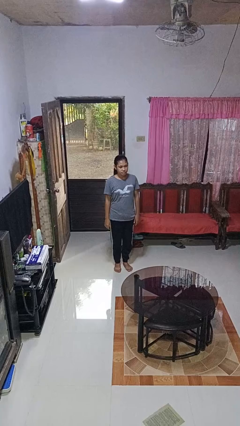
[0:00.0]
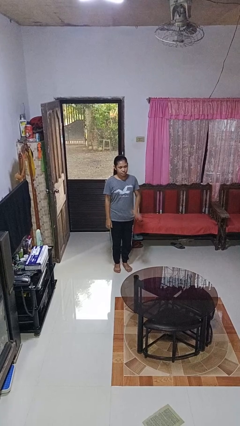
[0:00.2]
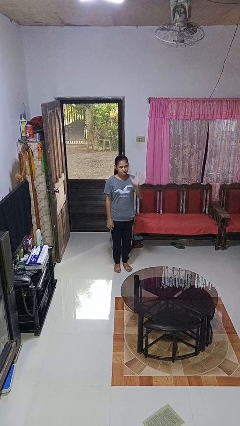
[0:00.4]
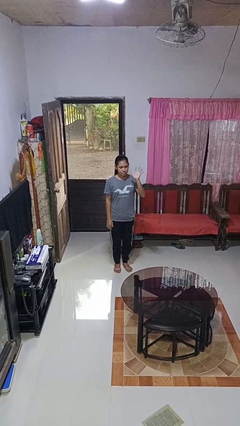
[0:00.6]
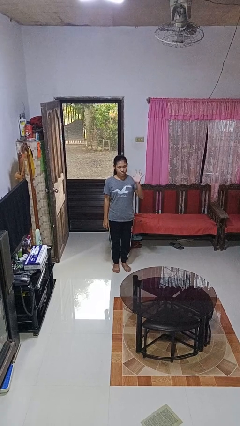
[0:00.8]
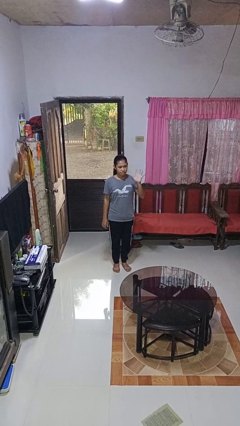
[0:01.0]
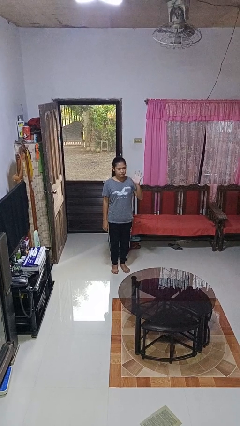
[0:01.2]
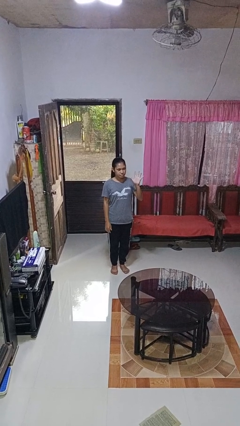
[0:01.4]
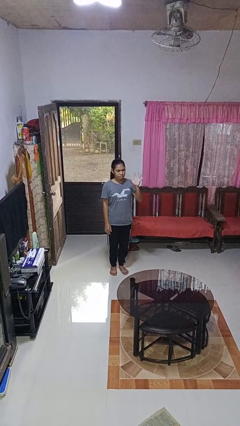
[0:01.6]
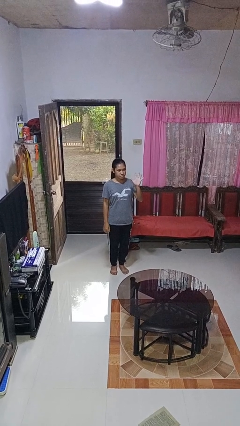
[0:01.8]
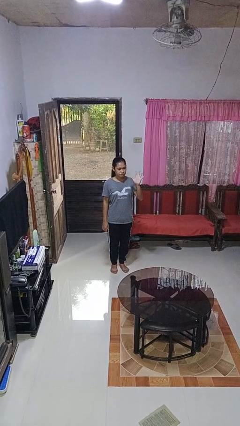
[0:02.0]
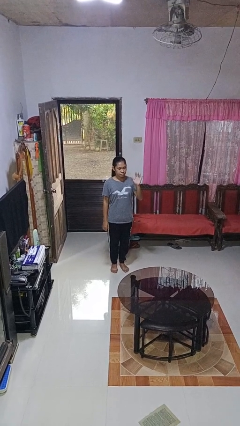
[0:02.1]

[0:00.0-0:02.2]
person gestures number five

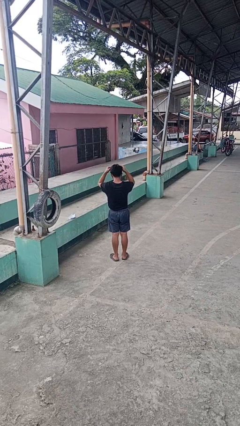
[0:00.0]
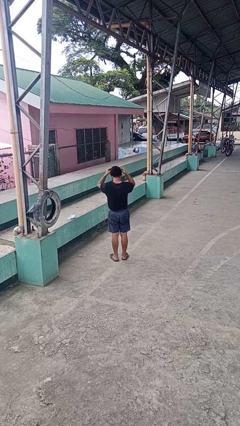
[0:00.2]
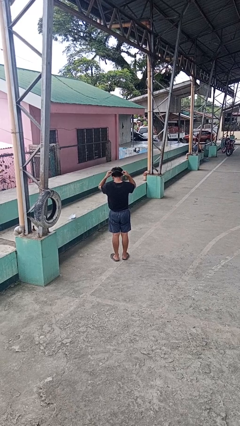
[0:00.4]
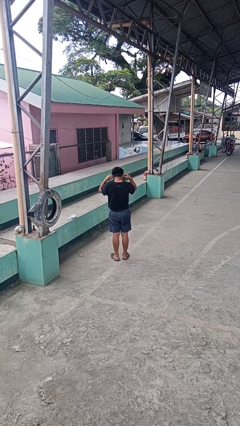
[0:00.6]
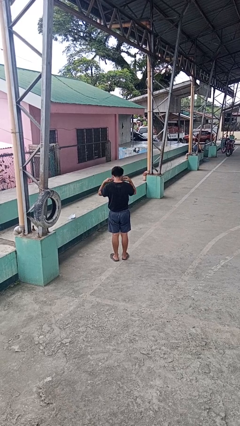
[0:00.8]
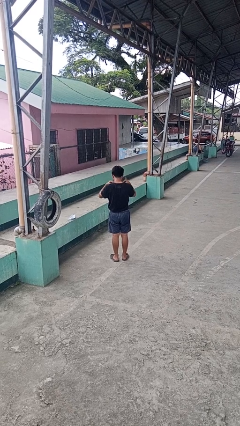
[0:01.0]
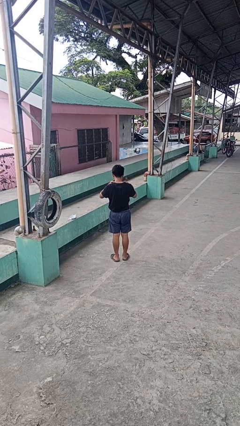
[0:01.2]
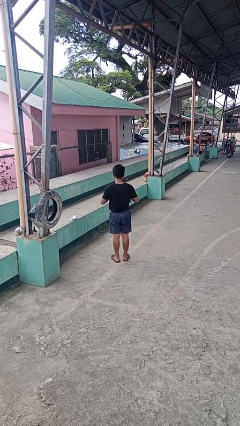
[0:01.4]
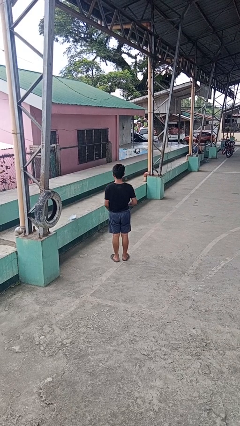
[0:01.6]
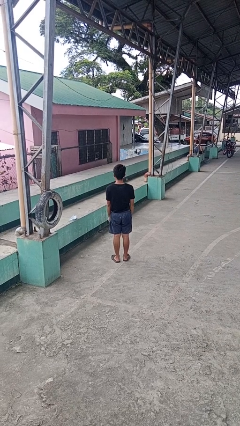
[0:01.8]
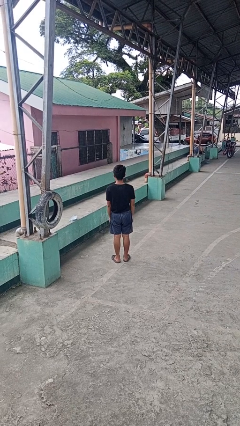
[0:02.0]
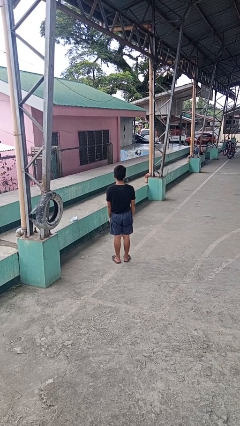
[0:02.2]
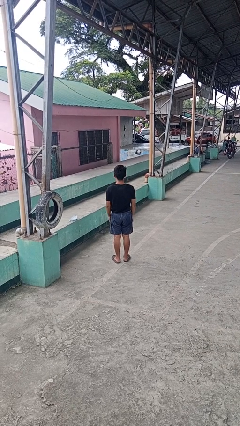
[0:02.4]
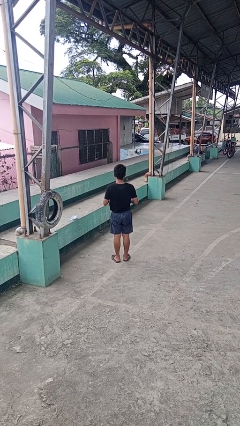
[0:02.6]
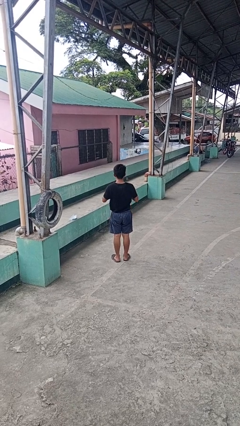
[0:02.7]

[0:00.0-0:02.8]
person puts on necklace

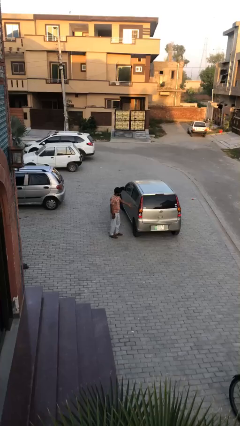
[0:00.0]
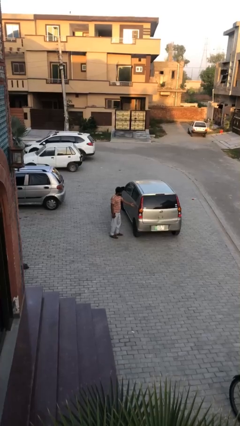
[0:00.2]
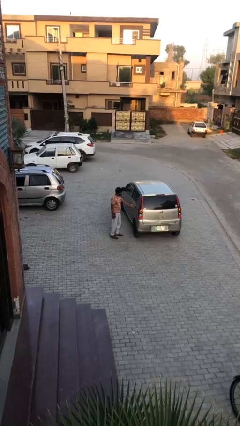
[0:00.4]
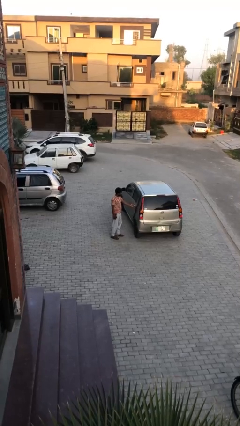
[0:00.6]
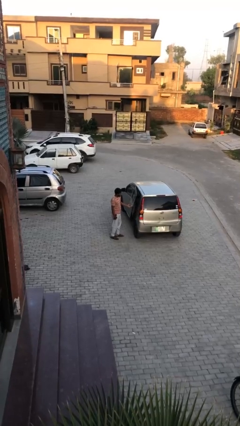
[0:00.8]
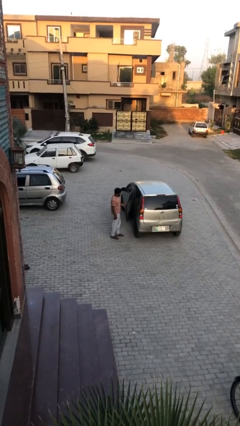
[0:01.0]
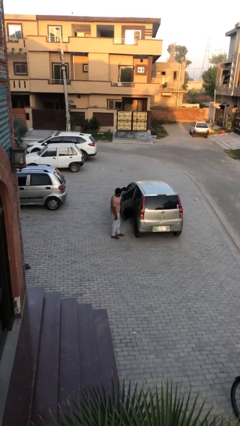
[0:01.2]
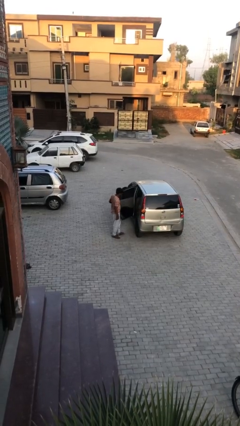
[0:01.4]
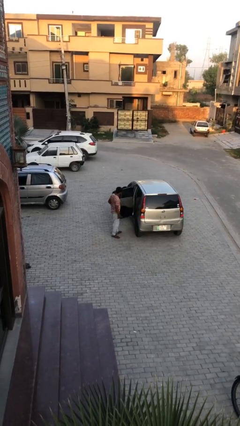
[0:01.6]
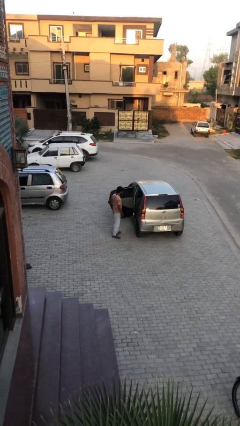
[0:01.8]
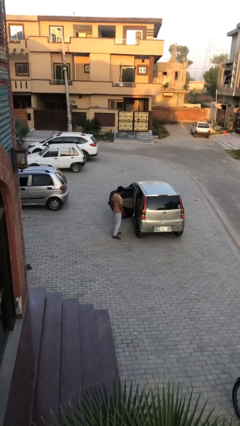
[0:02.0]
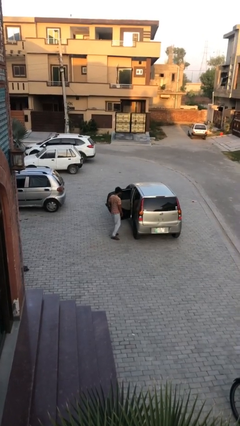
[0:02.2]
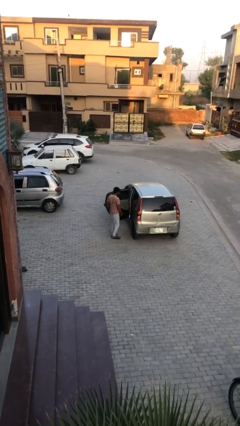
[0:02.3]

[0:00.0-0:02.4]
person opens car door

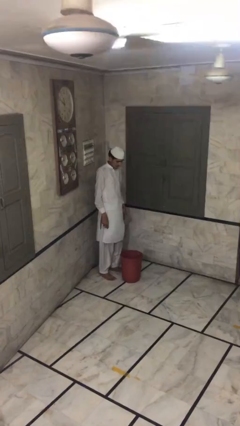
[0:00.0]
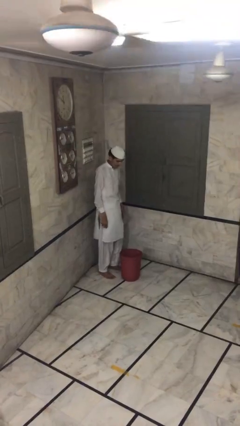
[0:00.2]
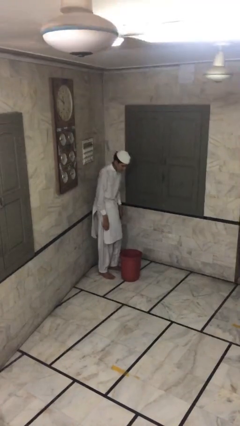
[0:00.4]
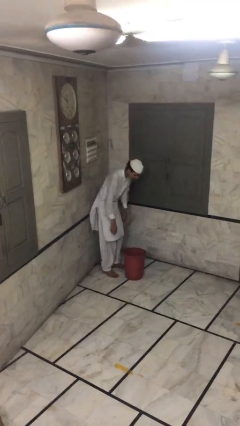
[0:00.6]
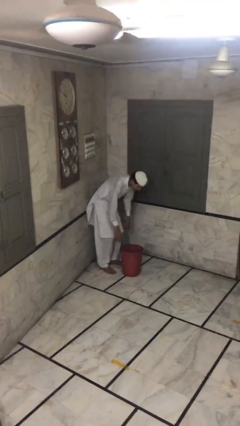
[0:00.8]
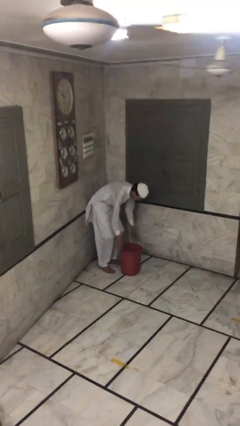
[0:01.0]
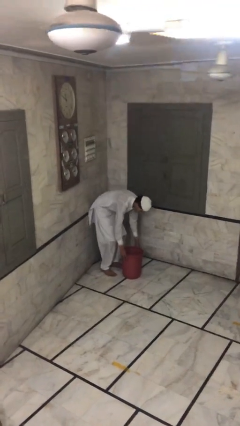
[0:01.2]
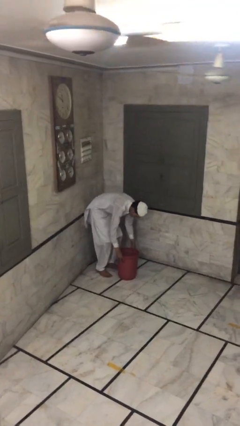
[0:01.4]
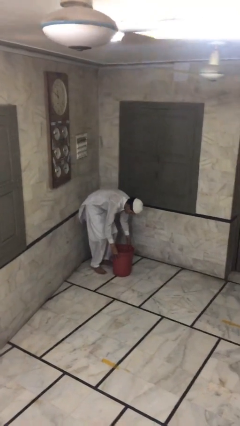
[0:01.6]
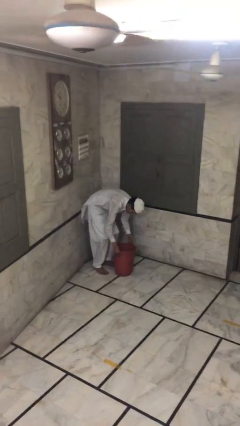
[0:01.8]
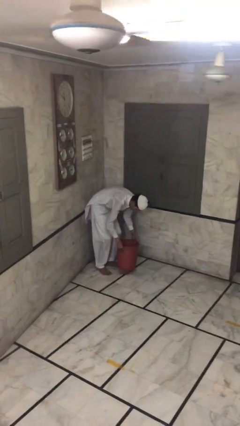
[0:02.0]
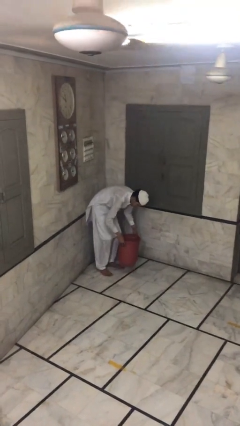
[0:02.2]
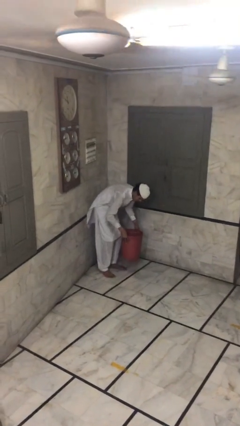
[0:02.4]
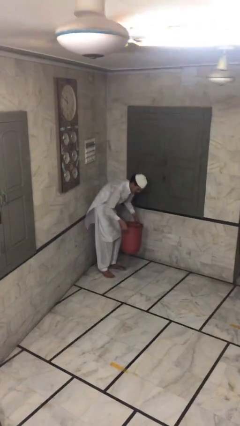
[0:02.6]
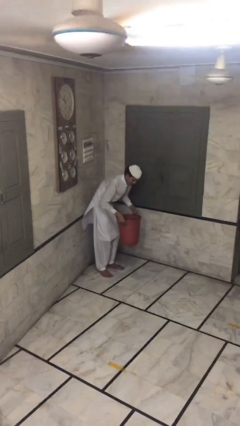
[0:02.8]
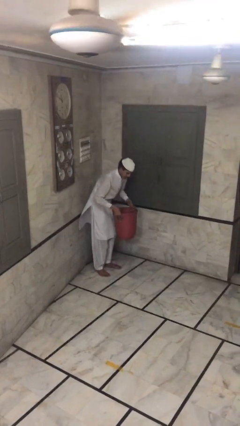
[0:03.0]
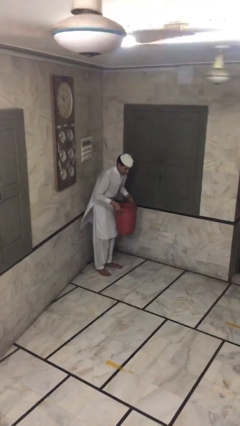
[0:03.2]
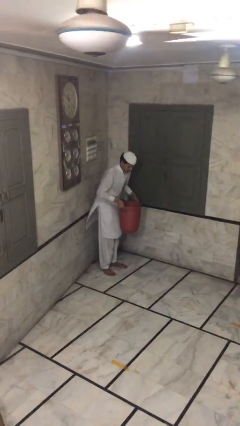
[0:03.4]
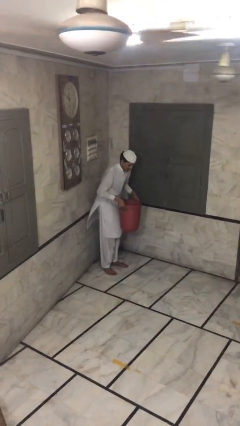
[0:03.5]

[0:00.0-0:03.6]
person picks up object from floor

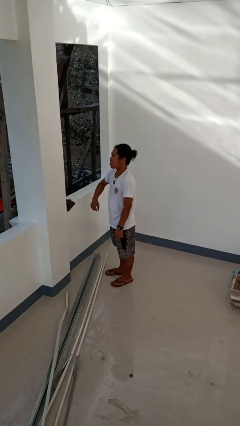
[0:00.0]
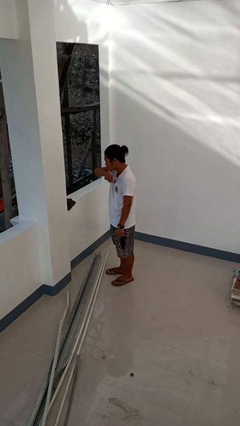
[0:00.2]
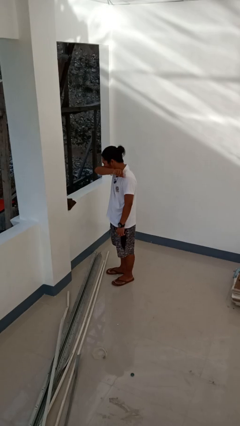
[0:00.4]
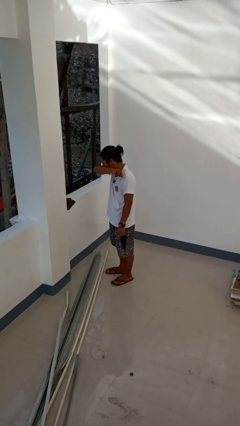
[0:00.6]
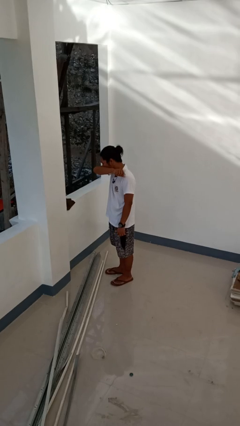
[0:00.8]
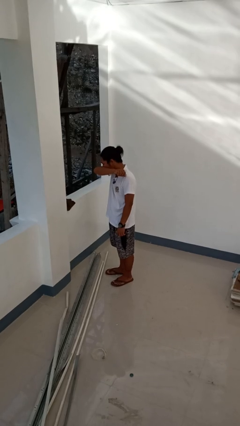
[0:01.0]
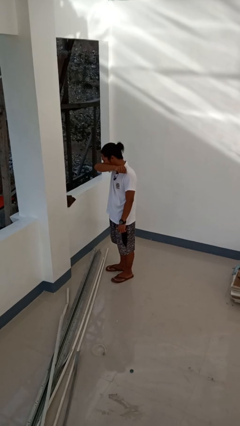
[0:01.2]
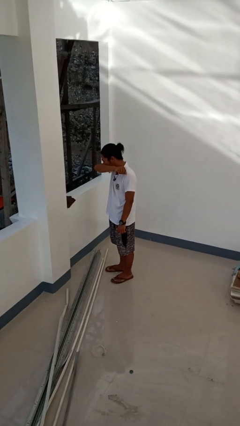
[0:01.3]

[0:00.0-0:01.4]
person sneezes into arm

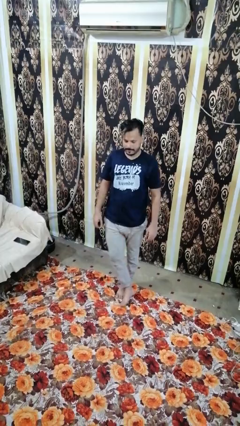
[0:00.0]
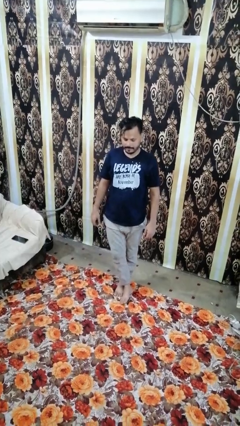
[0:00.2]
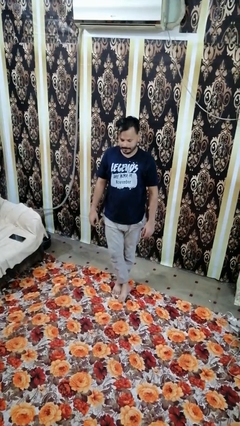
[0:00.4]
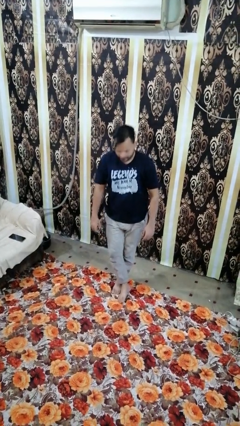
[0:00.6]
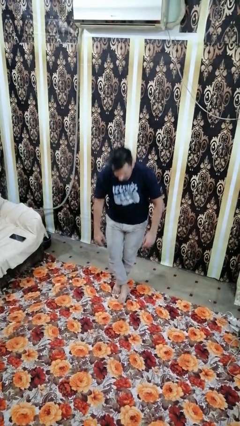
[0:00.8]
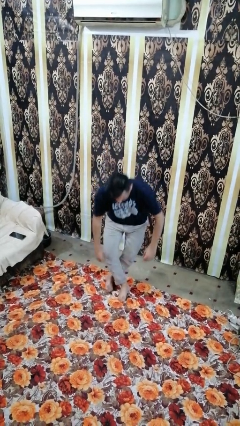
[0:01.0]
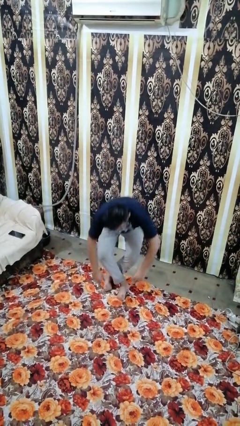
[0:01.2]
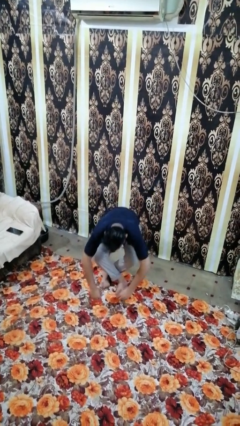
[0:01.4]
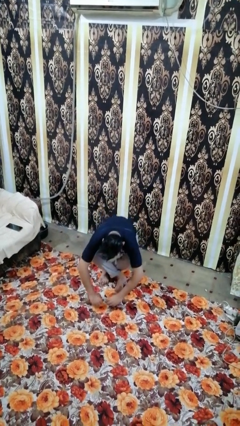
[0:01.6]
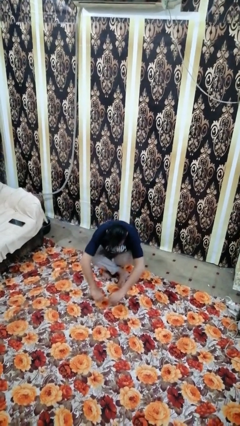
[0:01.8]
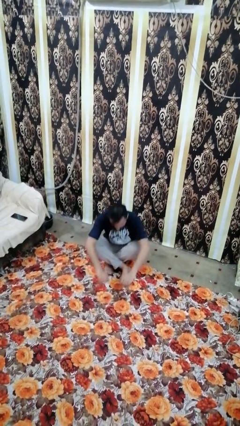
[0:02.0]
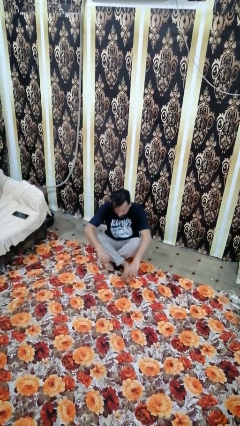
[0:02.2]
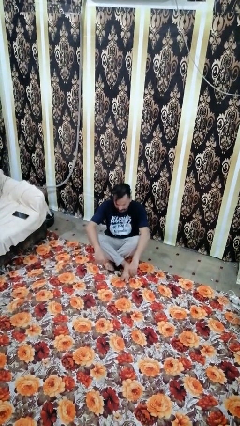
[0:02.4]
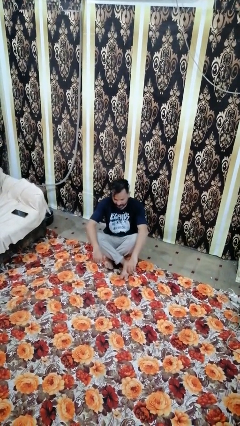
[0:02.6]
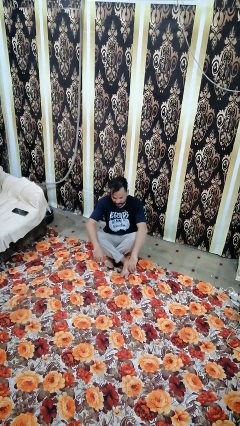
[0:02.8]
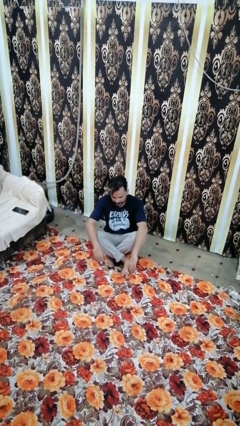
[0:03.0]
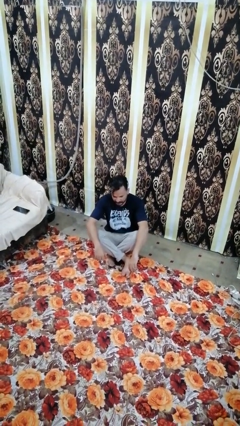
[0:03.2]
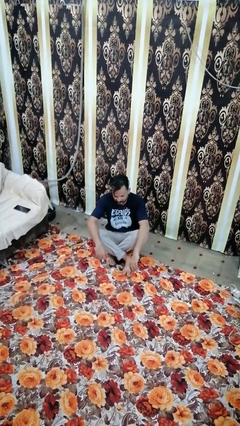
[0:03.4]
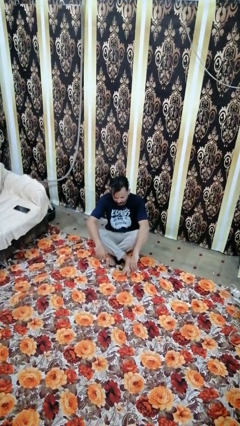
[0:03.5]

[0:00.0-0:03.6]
person sits crisscross

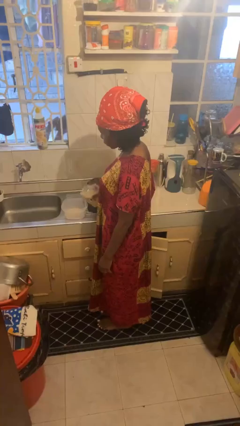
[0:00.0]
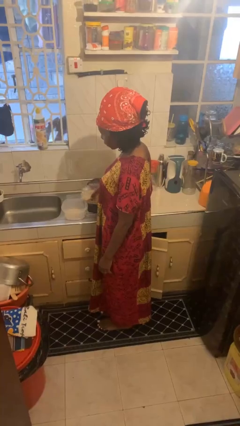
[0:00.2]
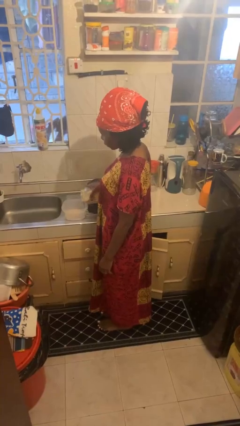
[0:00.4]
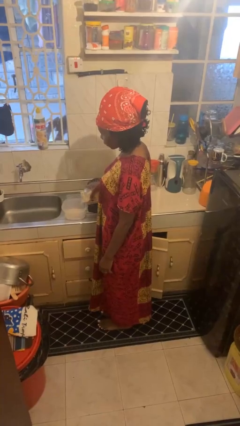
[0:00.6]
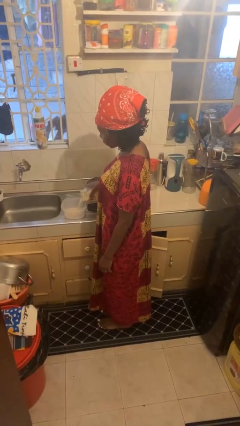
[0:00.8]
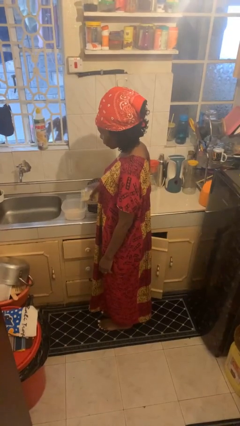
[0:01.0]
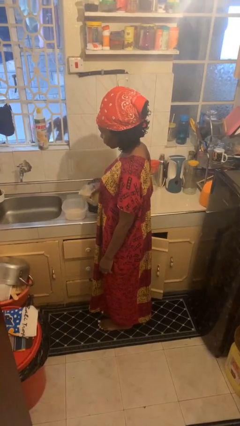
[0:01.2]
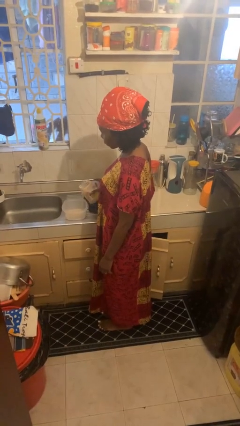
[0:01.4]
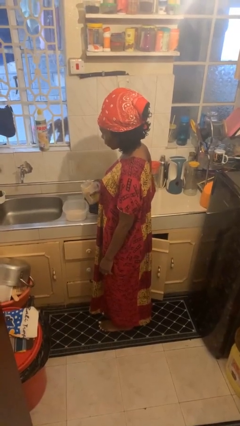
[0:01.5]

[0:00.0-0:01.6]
person pours into bowl
